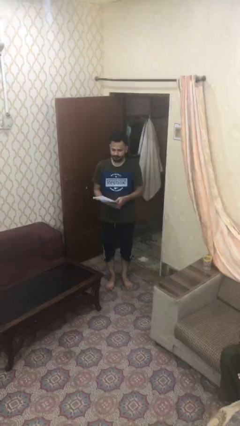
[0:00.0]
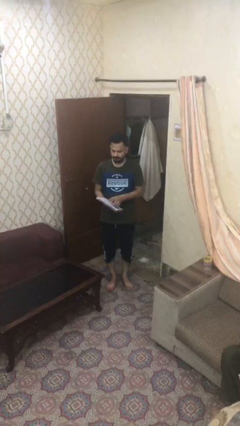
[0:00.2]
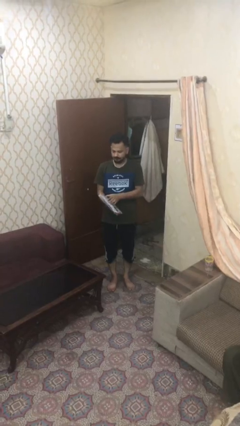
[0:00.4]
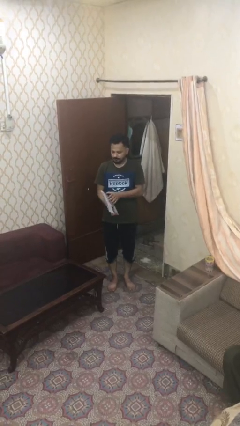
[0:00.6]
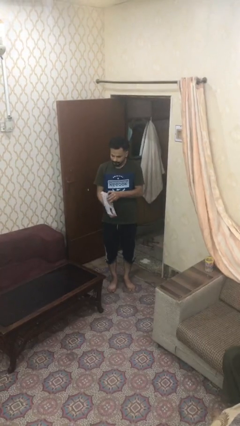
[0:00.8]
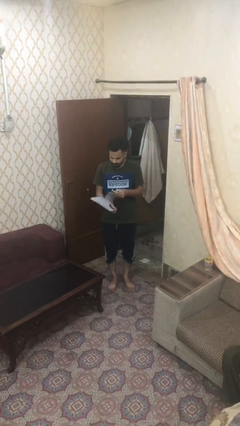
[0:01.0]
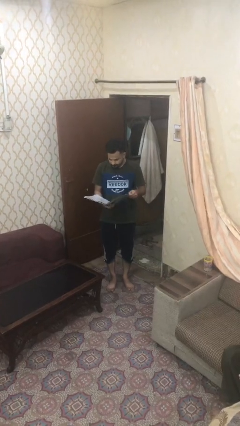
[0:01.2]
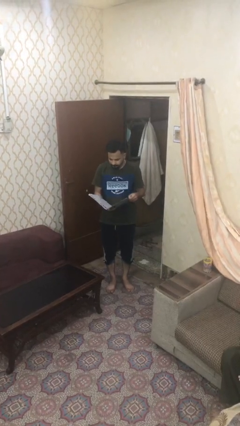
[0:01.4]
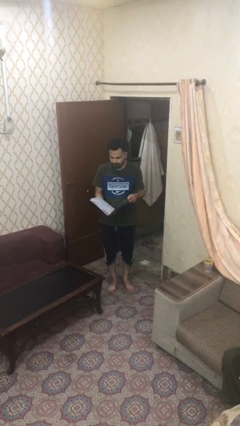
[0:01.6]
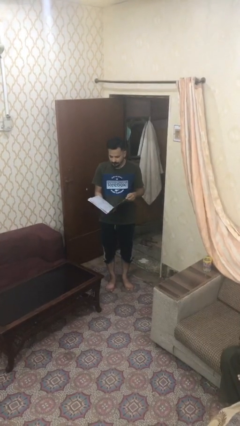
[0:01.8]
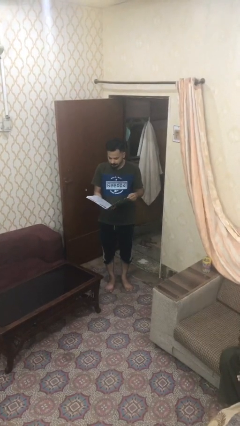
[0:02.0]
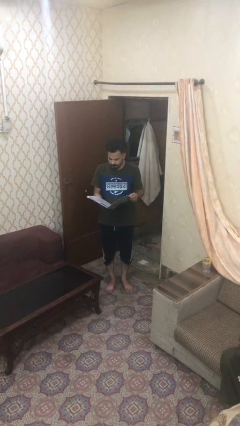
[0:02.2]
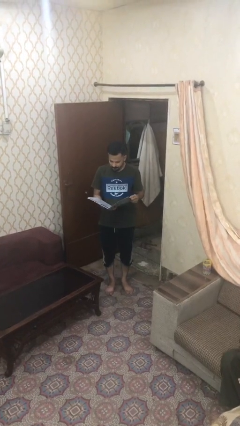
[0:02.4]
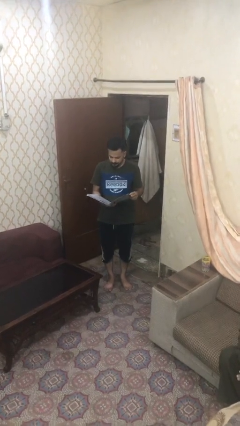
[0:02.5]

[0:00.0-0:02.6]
person reads document

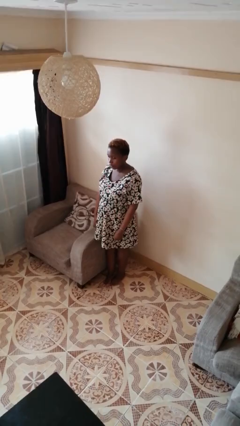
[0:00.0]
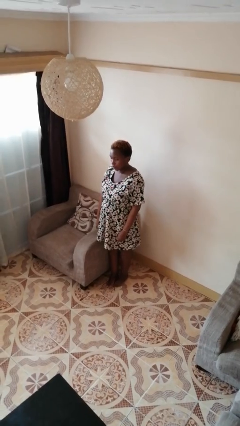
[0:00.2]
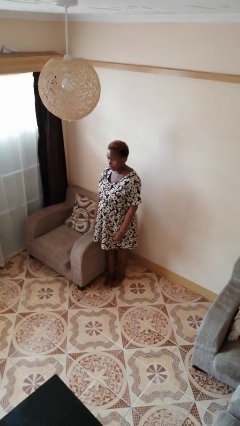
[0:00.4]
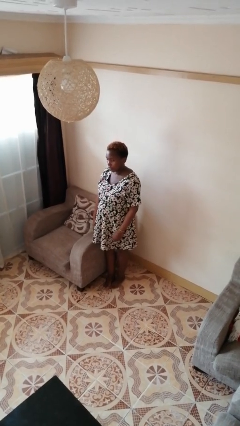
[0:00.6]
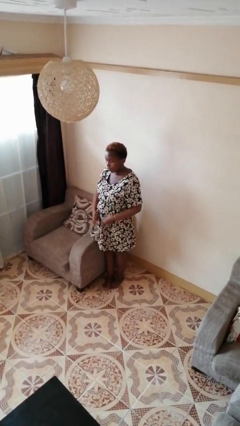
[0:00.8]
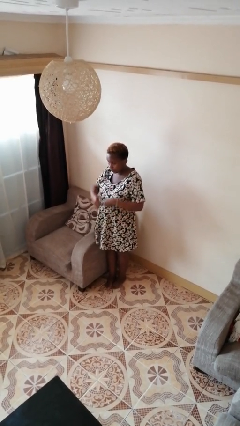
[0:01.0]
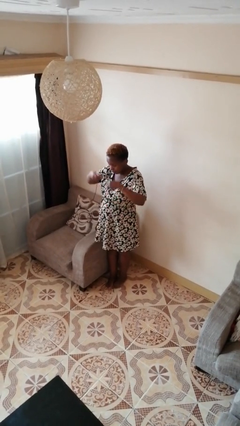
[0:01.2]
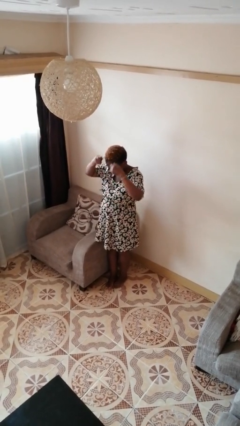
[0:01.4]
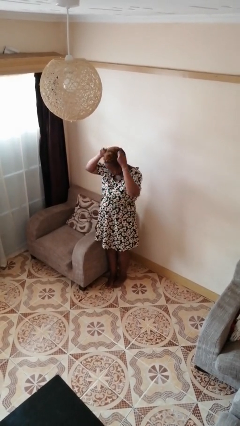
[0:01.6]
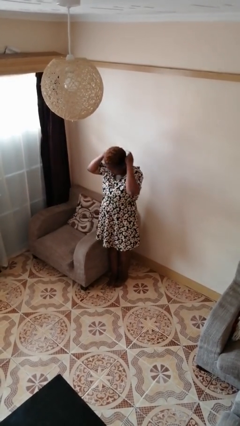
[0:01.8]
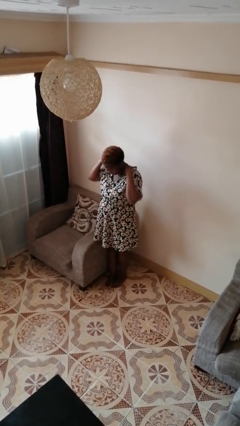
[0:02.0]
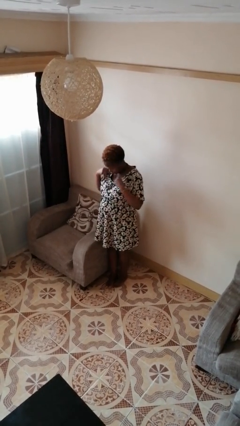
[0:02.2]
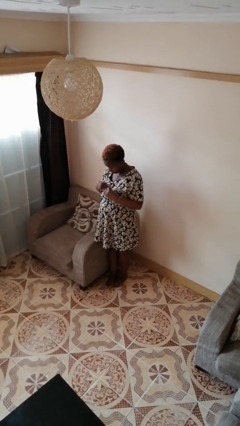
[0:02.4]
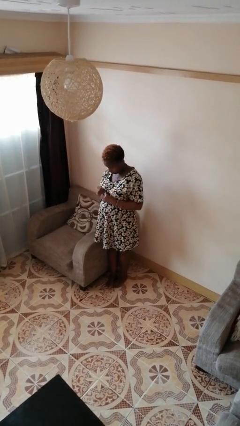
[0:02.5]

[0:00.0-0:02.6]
person puts on necklace

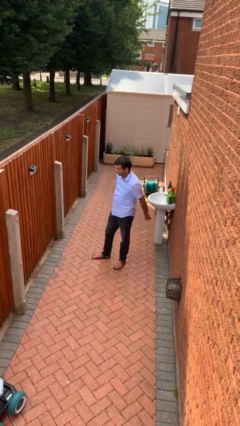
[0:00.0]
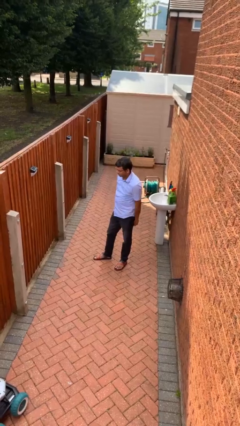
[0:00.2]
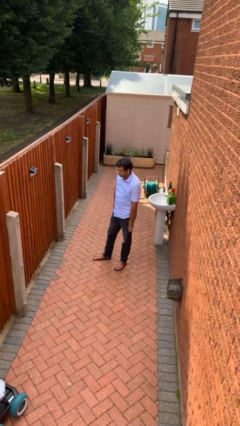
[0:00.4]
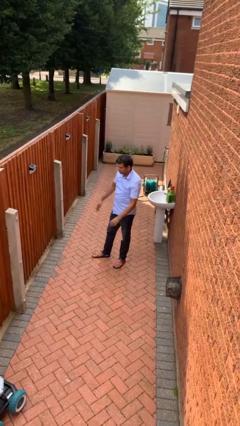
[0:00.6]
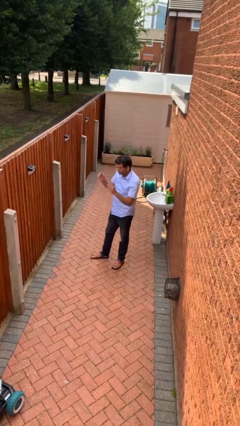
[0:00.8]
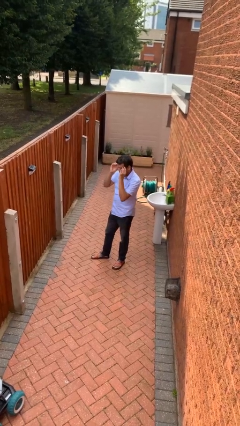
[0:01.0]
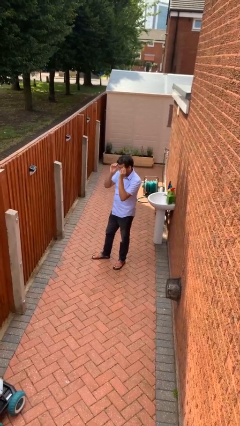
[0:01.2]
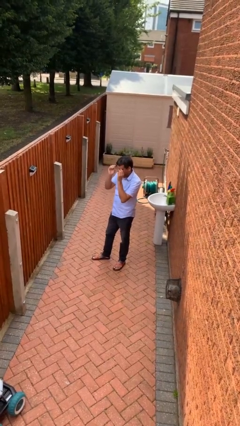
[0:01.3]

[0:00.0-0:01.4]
person takes off glasses

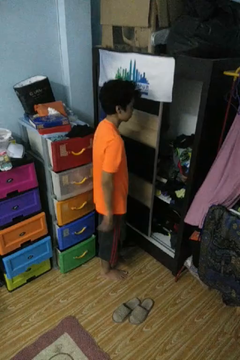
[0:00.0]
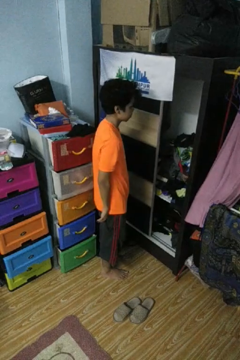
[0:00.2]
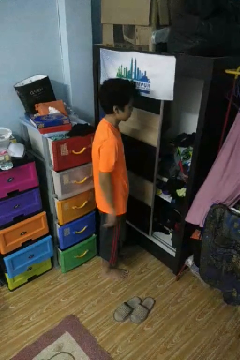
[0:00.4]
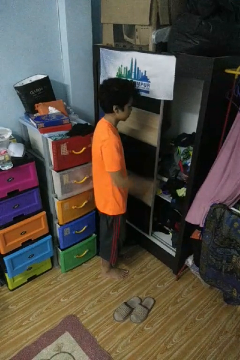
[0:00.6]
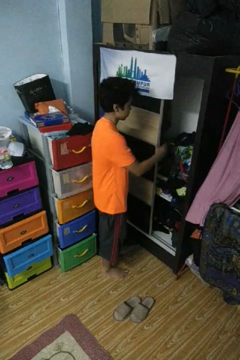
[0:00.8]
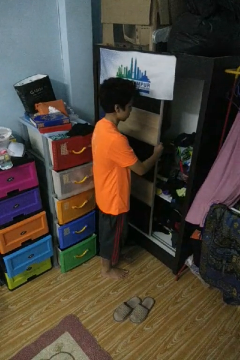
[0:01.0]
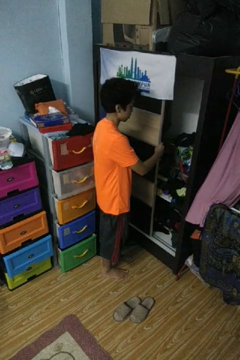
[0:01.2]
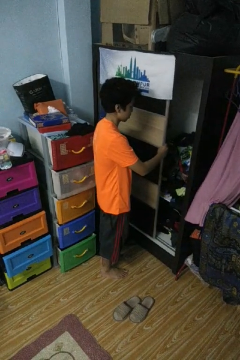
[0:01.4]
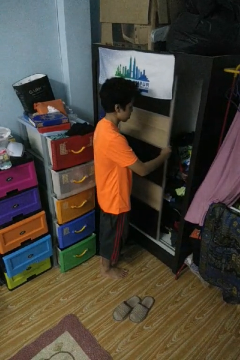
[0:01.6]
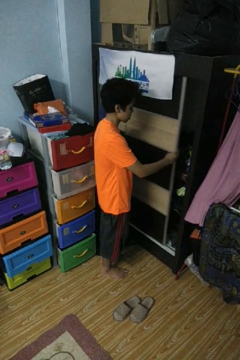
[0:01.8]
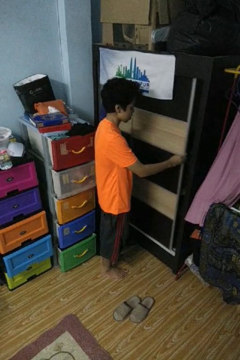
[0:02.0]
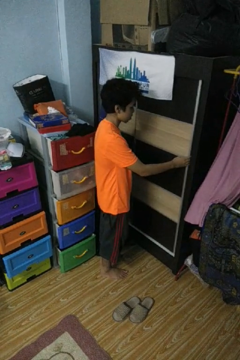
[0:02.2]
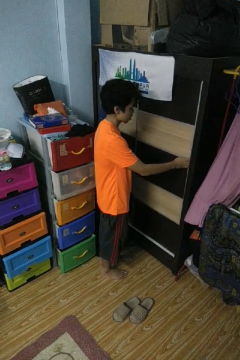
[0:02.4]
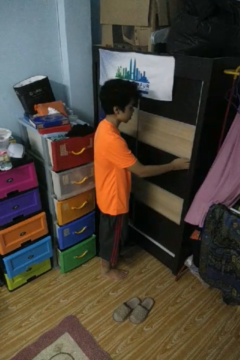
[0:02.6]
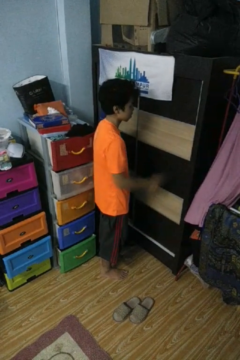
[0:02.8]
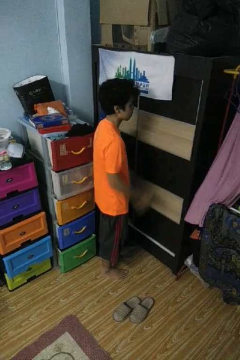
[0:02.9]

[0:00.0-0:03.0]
person closes closet door

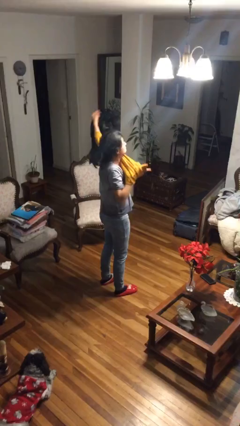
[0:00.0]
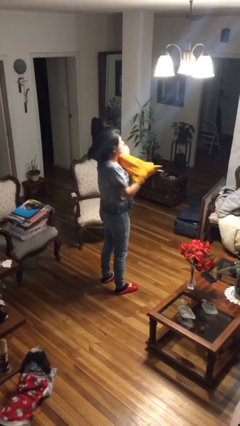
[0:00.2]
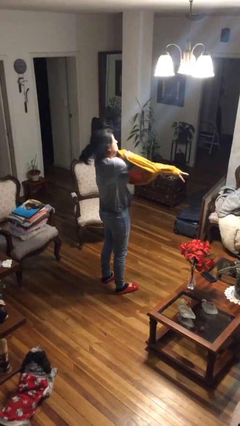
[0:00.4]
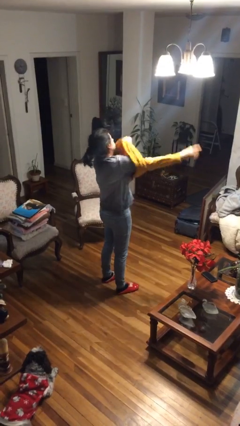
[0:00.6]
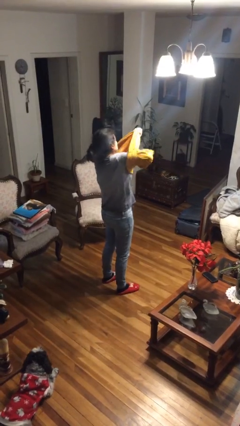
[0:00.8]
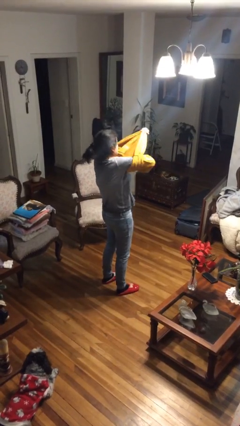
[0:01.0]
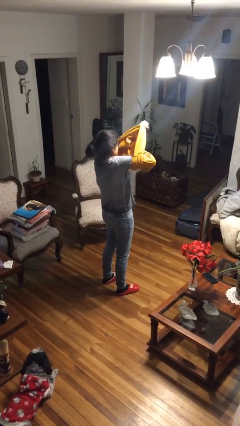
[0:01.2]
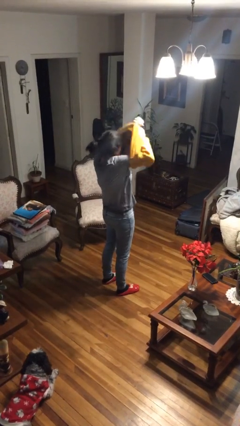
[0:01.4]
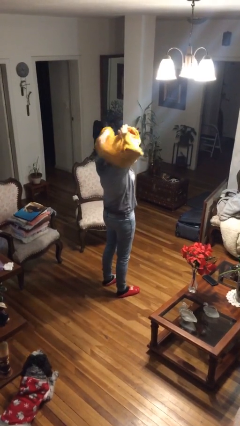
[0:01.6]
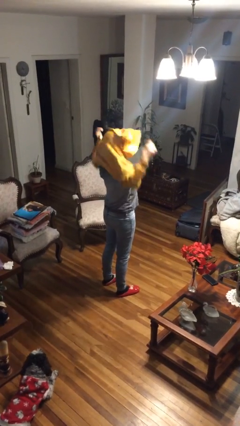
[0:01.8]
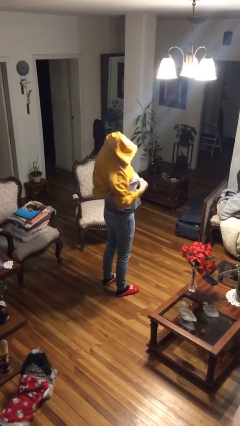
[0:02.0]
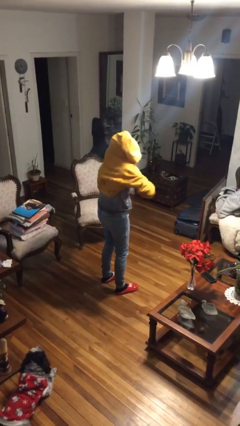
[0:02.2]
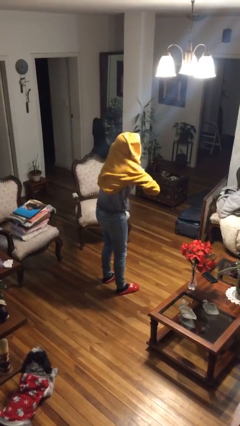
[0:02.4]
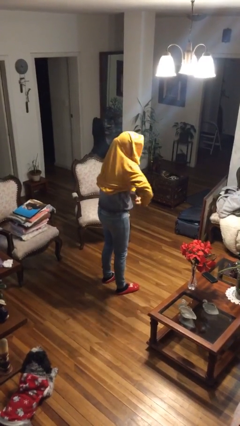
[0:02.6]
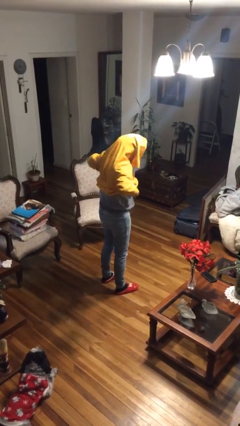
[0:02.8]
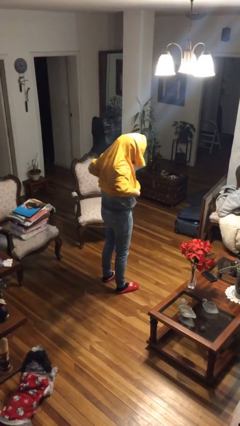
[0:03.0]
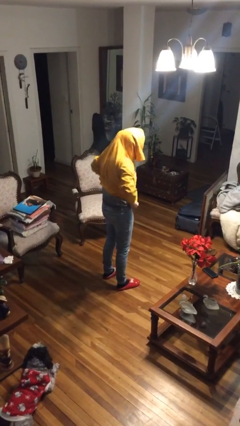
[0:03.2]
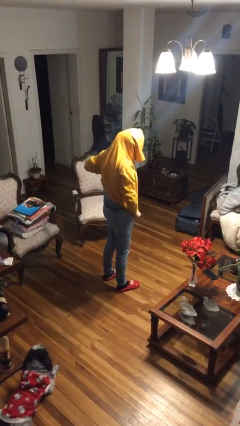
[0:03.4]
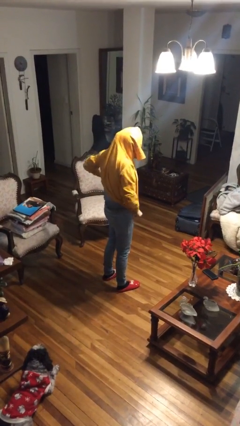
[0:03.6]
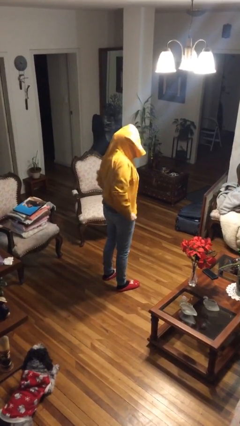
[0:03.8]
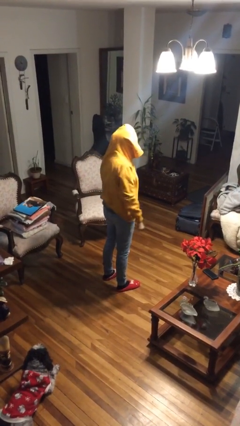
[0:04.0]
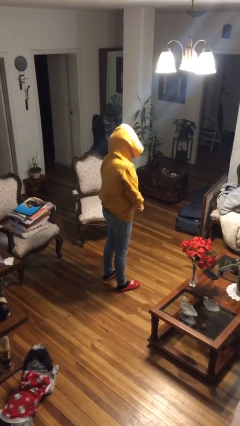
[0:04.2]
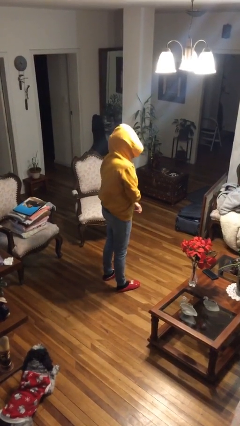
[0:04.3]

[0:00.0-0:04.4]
person puts on hoodie

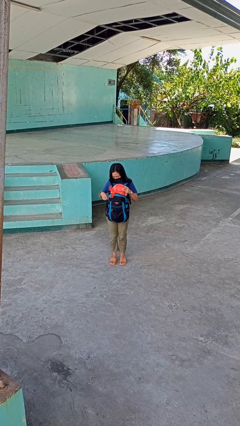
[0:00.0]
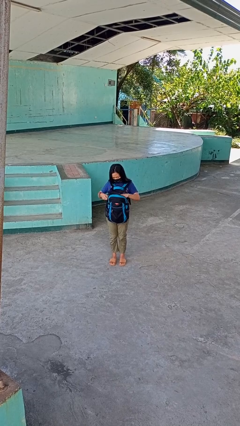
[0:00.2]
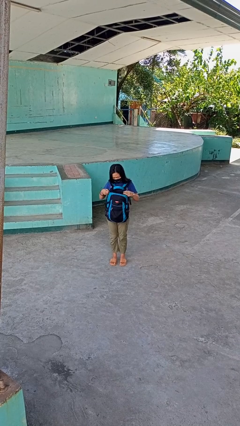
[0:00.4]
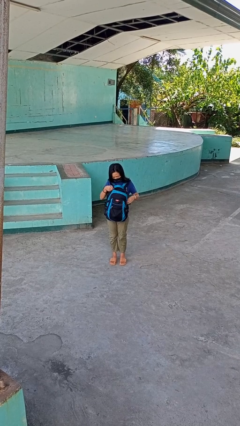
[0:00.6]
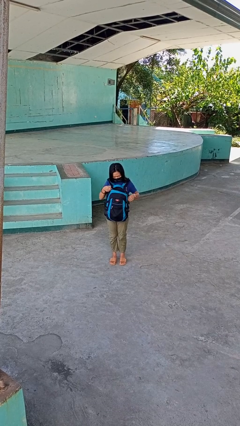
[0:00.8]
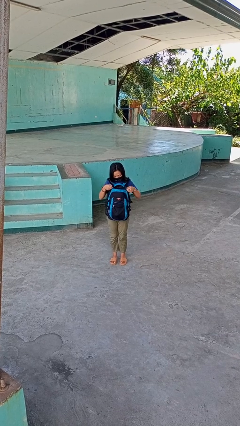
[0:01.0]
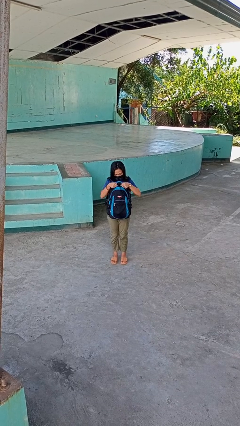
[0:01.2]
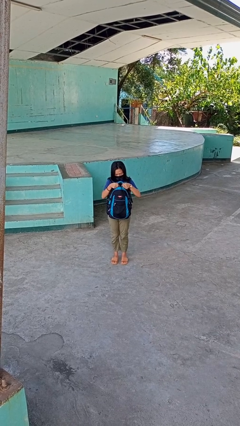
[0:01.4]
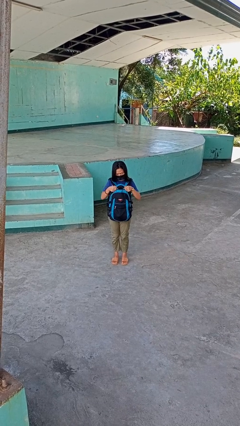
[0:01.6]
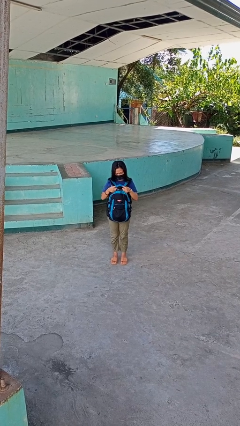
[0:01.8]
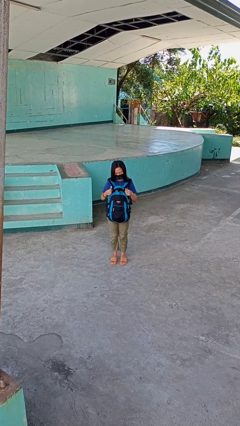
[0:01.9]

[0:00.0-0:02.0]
person puts object into backpack

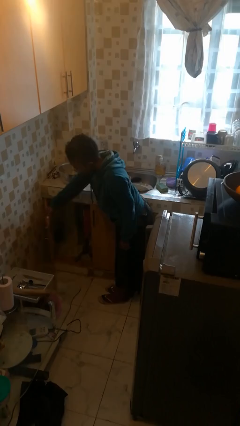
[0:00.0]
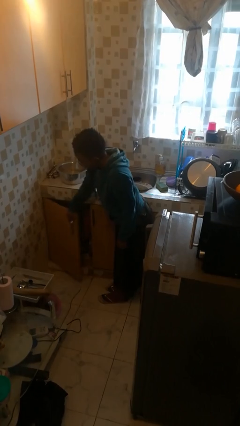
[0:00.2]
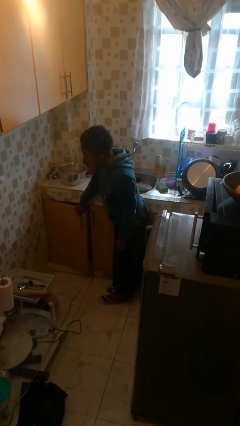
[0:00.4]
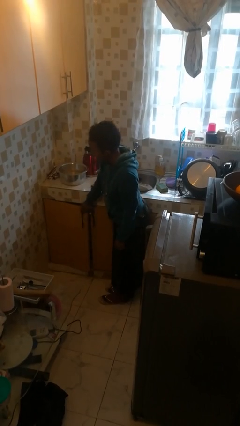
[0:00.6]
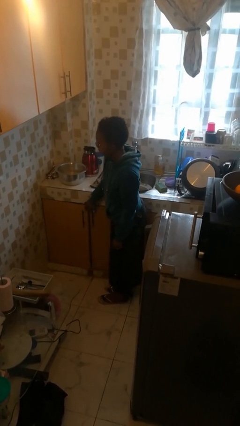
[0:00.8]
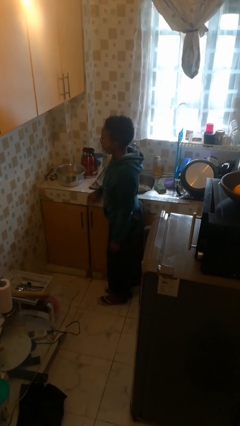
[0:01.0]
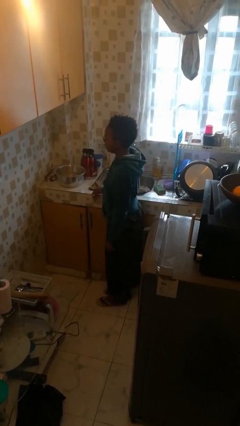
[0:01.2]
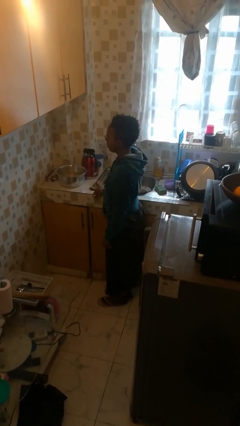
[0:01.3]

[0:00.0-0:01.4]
person closes cabinet

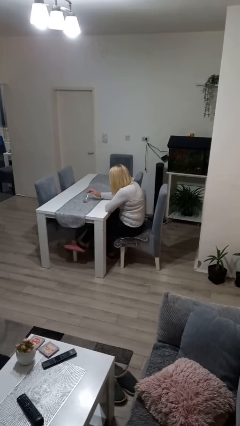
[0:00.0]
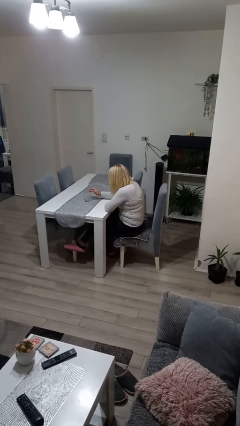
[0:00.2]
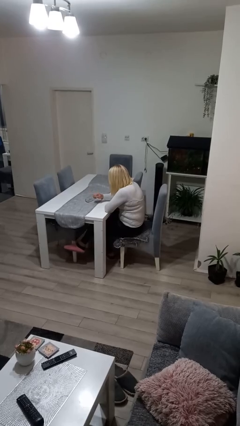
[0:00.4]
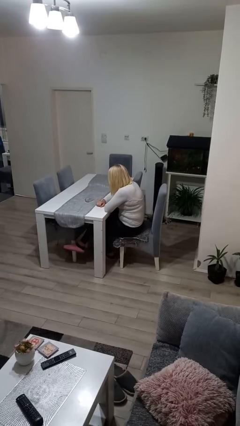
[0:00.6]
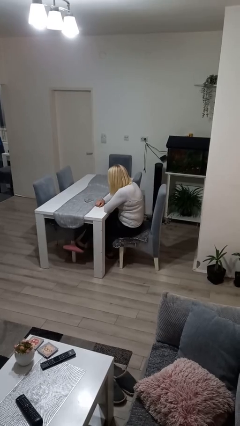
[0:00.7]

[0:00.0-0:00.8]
person knocks over glass
